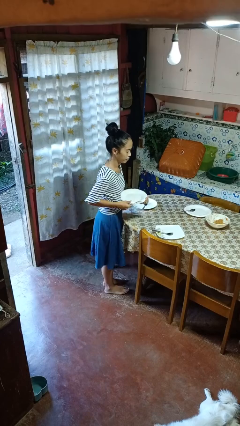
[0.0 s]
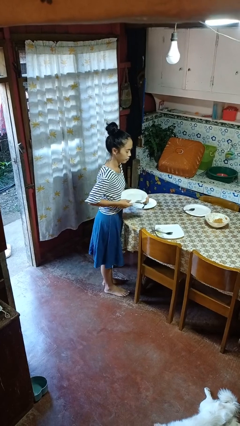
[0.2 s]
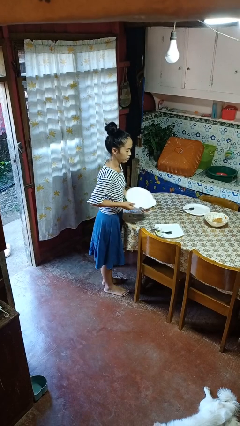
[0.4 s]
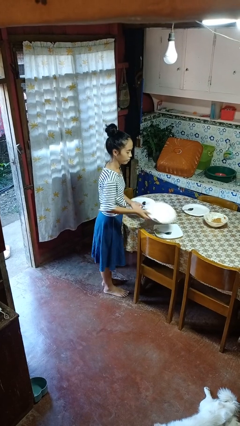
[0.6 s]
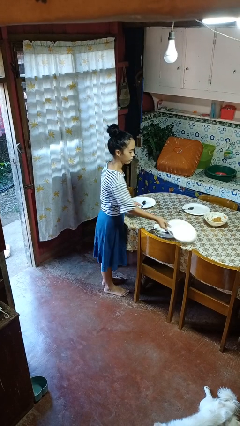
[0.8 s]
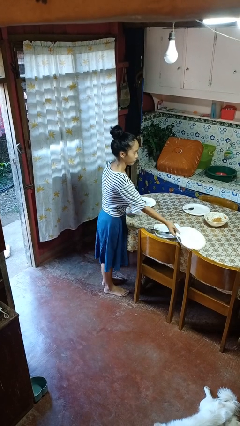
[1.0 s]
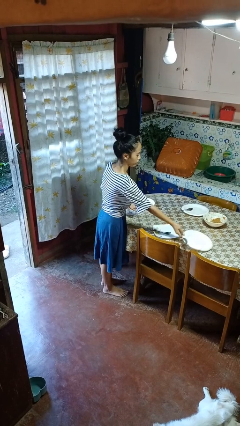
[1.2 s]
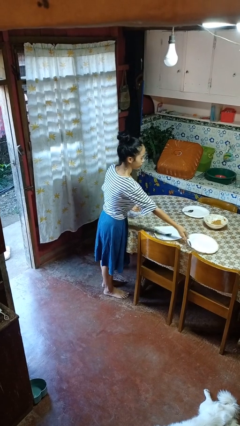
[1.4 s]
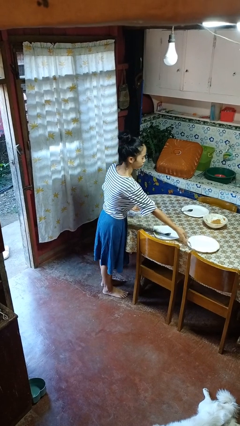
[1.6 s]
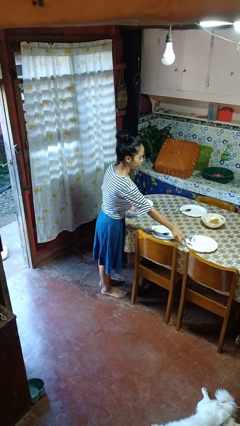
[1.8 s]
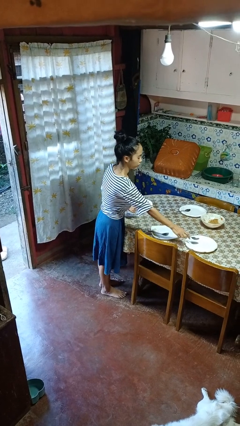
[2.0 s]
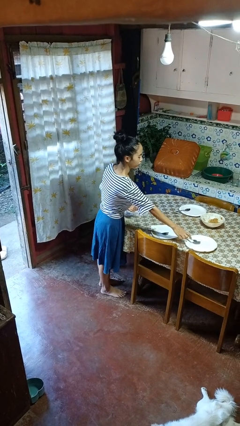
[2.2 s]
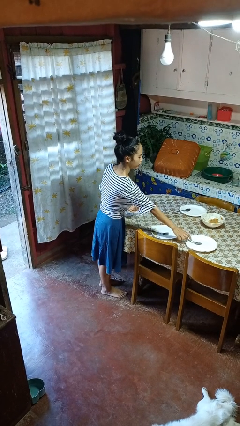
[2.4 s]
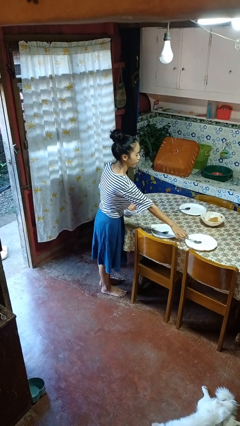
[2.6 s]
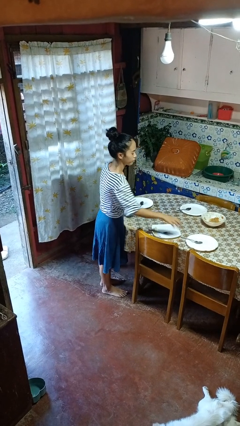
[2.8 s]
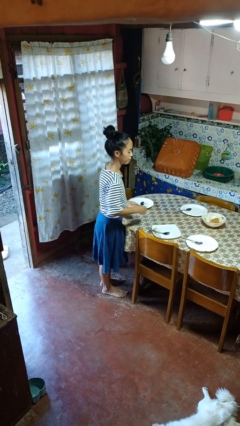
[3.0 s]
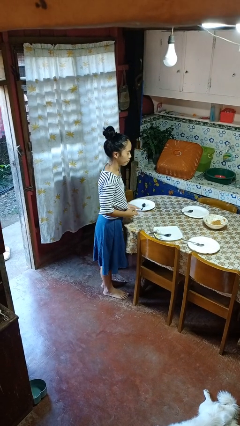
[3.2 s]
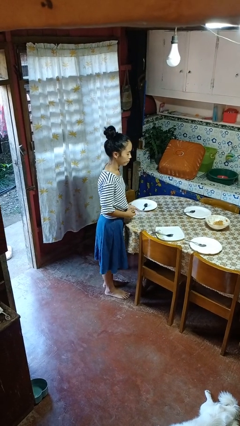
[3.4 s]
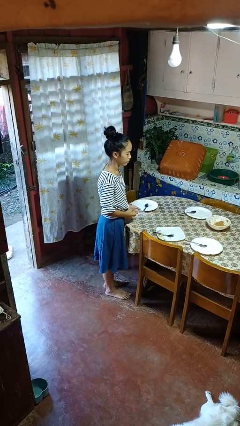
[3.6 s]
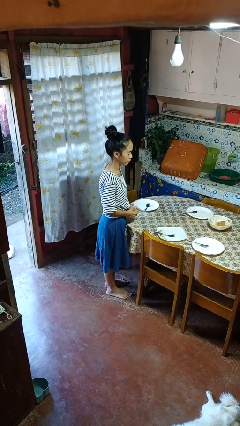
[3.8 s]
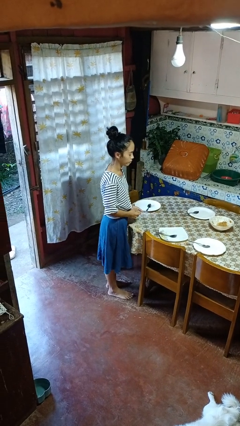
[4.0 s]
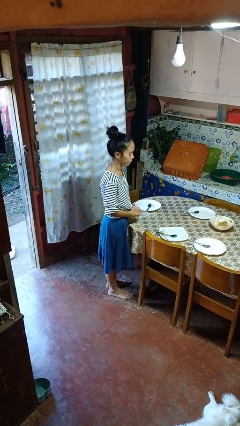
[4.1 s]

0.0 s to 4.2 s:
person sets table

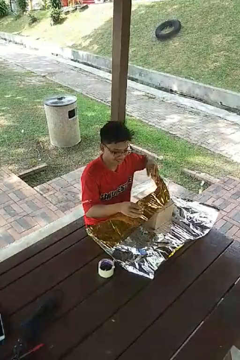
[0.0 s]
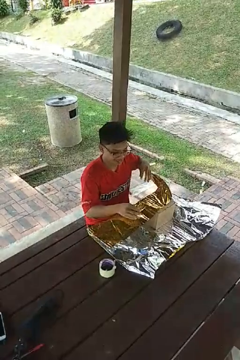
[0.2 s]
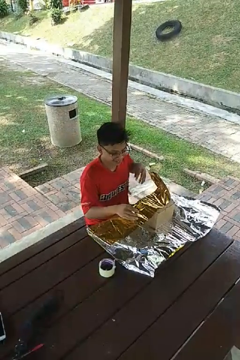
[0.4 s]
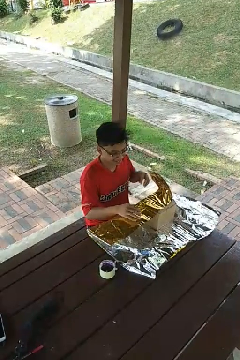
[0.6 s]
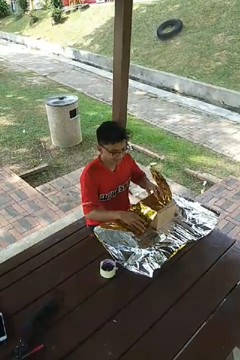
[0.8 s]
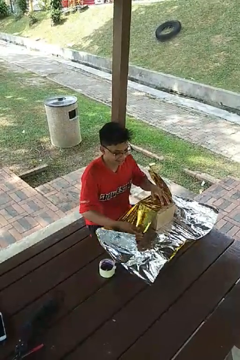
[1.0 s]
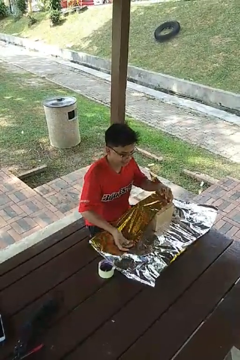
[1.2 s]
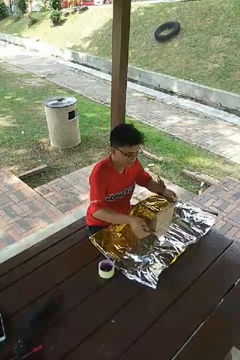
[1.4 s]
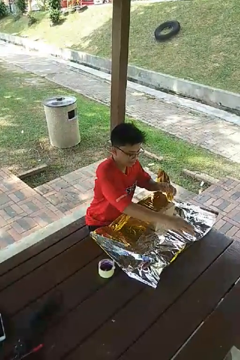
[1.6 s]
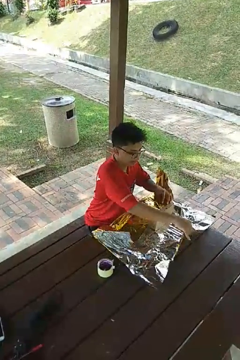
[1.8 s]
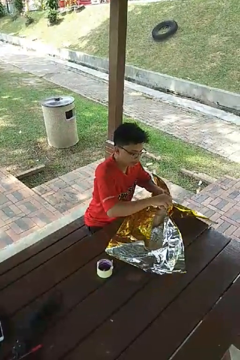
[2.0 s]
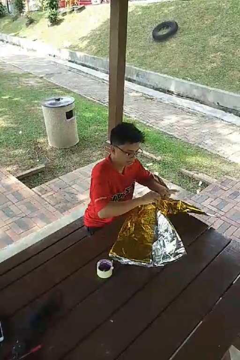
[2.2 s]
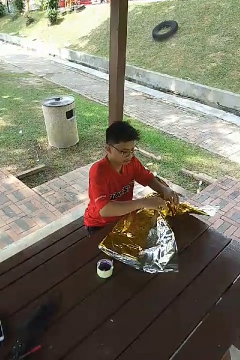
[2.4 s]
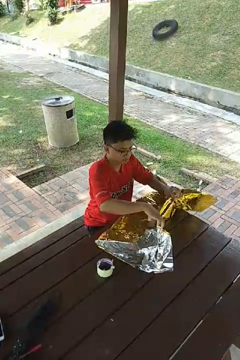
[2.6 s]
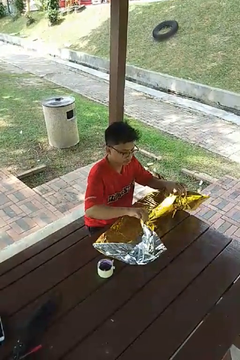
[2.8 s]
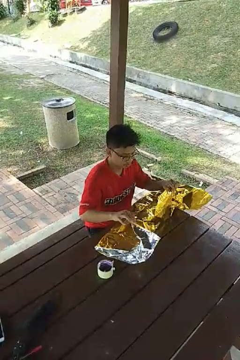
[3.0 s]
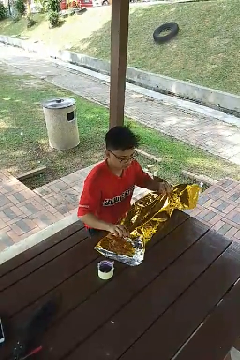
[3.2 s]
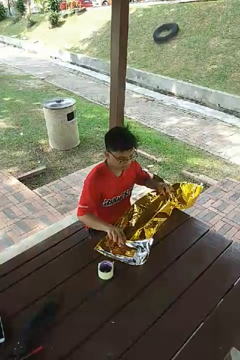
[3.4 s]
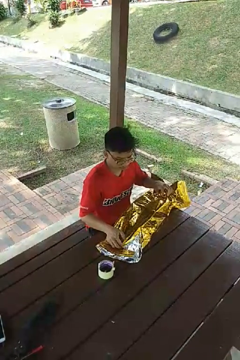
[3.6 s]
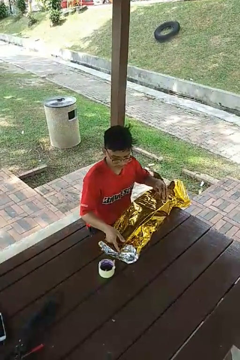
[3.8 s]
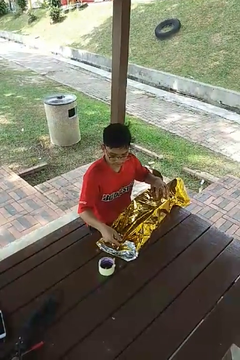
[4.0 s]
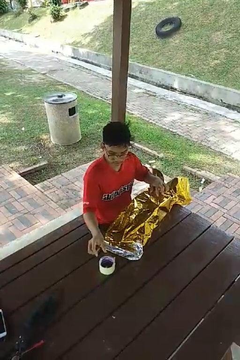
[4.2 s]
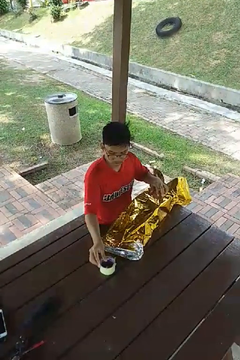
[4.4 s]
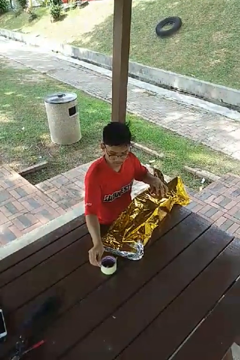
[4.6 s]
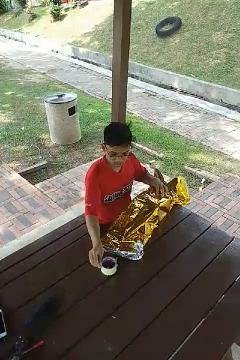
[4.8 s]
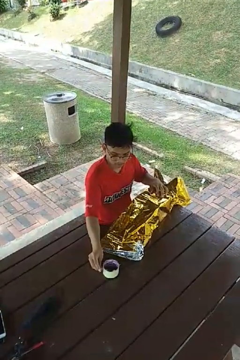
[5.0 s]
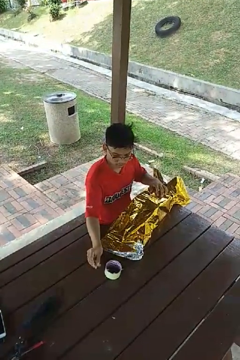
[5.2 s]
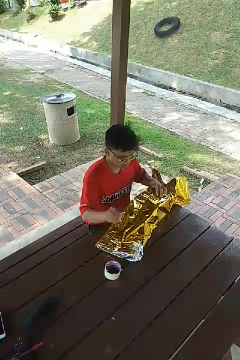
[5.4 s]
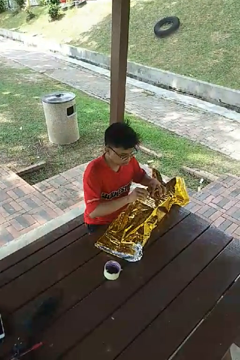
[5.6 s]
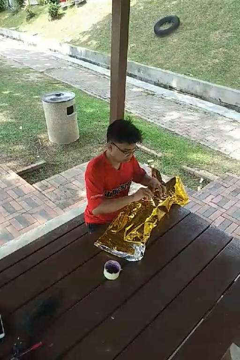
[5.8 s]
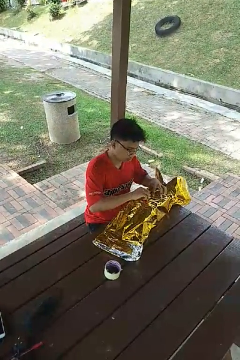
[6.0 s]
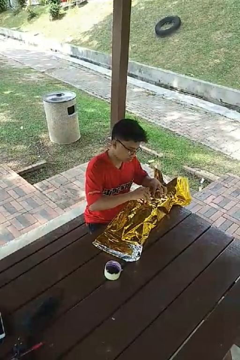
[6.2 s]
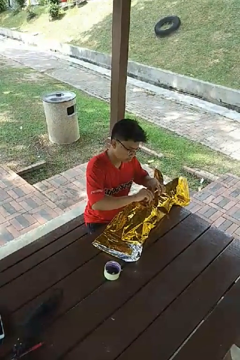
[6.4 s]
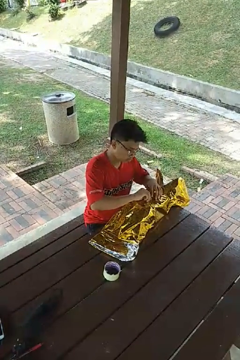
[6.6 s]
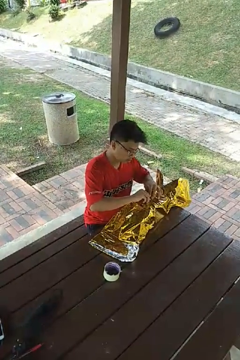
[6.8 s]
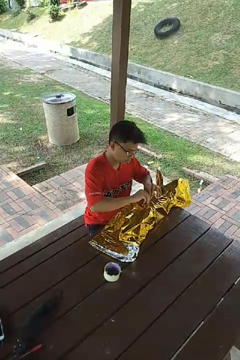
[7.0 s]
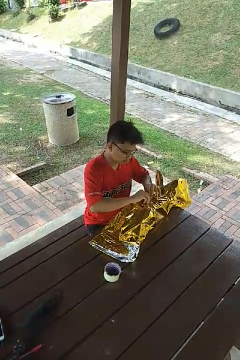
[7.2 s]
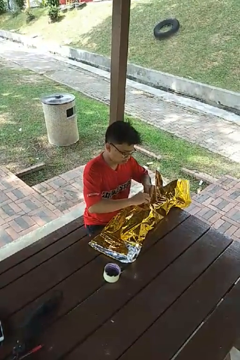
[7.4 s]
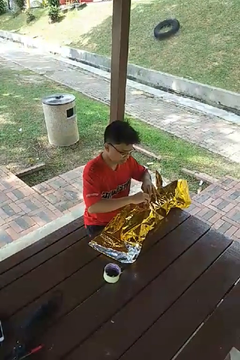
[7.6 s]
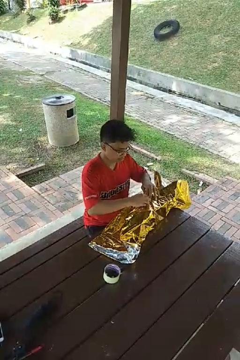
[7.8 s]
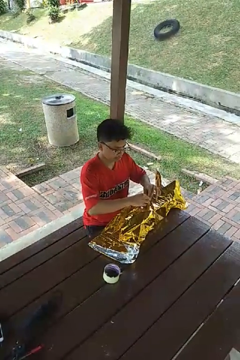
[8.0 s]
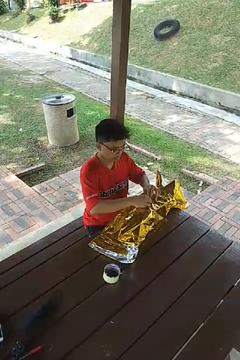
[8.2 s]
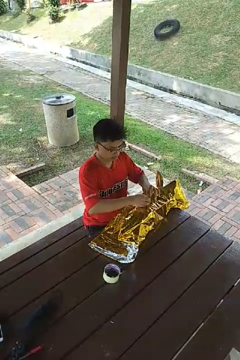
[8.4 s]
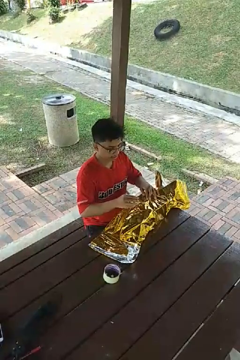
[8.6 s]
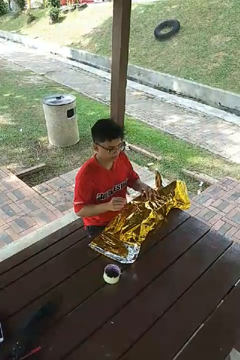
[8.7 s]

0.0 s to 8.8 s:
person wraps box

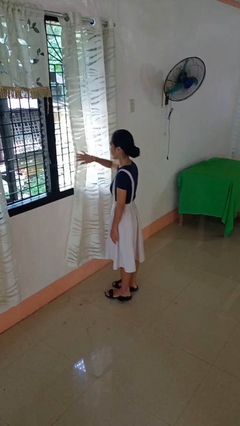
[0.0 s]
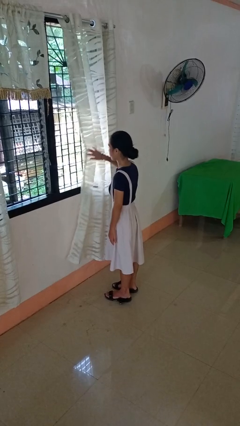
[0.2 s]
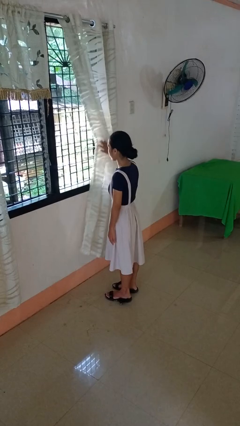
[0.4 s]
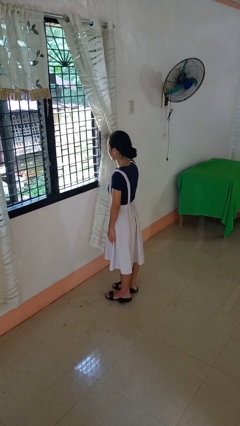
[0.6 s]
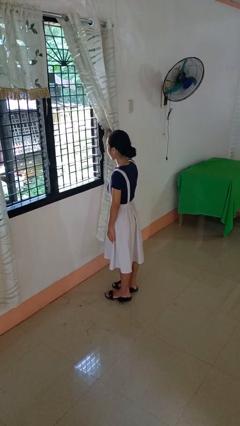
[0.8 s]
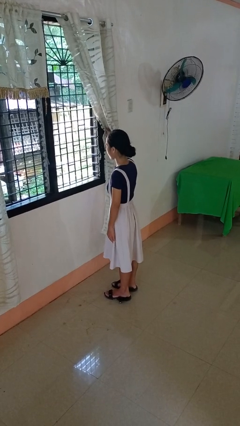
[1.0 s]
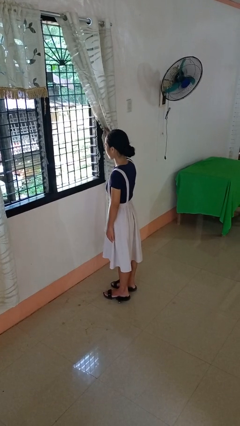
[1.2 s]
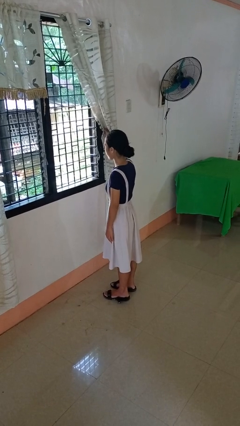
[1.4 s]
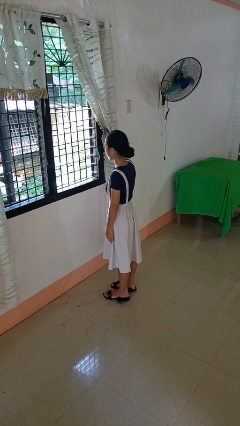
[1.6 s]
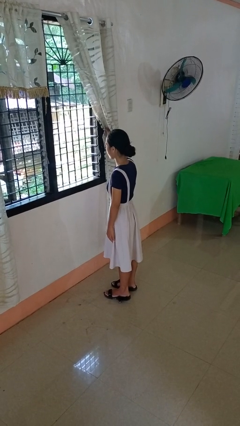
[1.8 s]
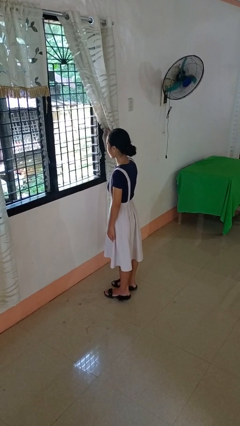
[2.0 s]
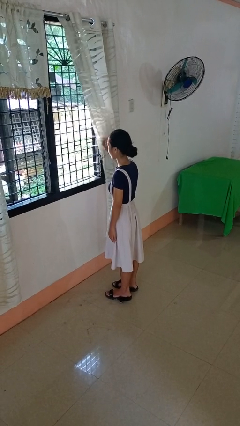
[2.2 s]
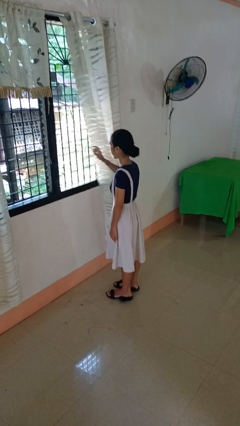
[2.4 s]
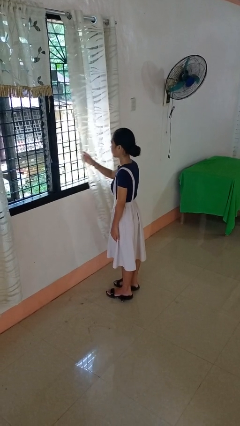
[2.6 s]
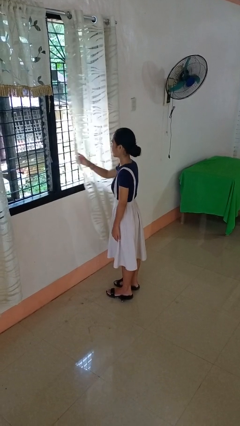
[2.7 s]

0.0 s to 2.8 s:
person opens curtains

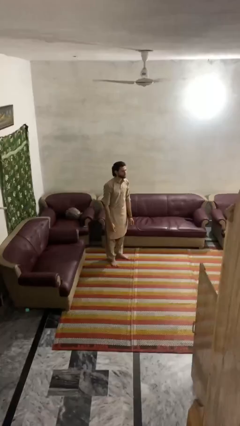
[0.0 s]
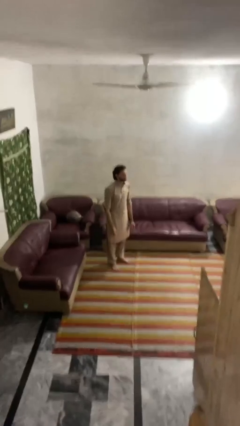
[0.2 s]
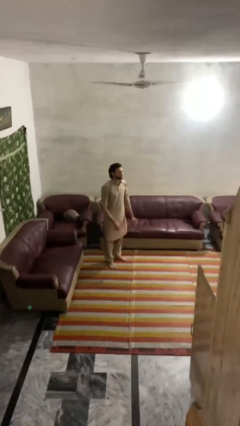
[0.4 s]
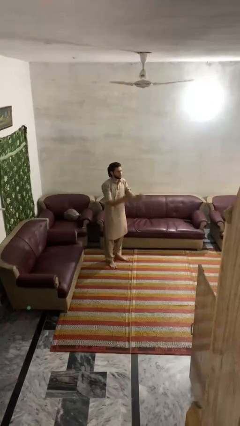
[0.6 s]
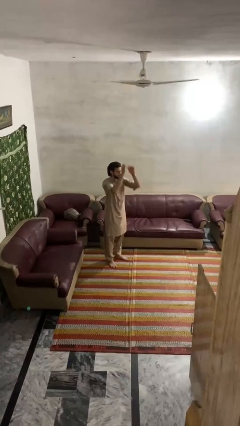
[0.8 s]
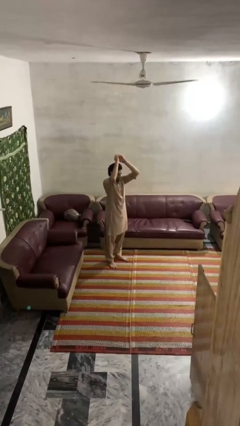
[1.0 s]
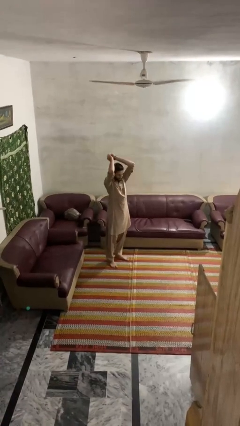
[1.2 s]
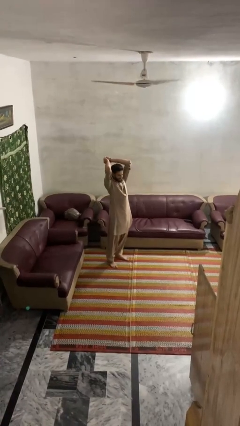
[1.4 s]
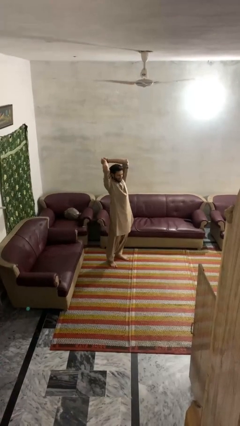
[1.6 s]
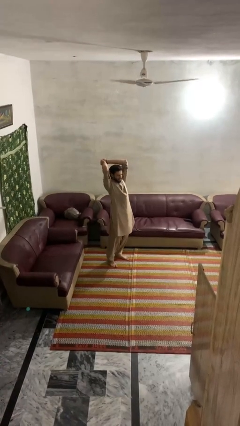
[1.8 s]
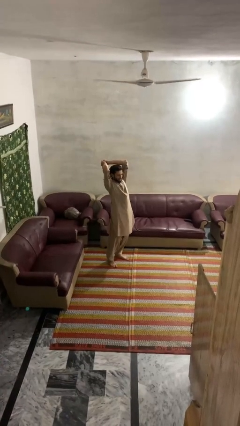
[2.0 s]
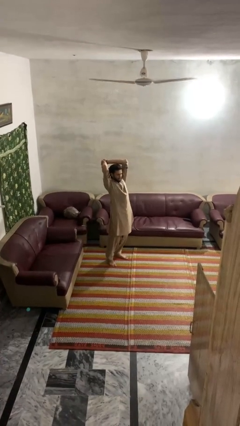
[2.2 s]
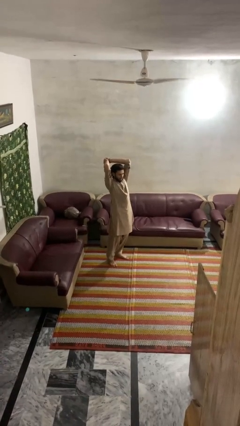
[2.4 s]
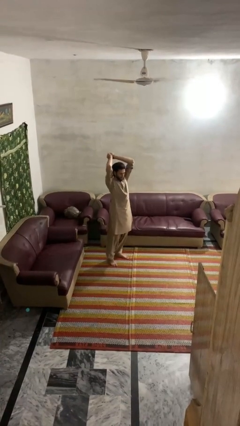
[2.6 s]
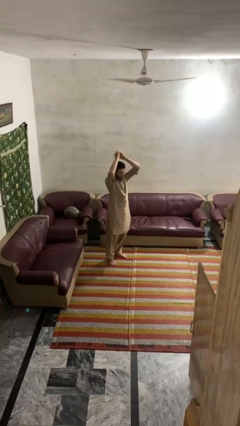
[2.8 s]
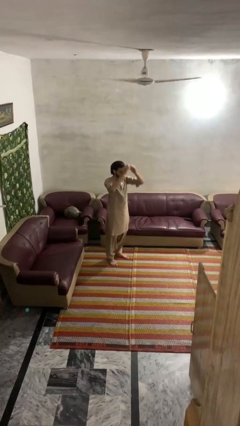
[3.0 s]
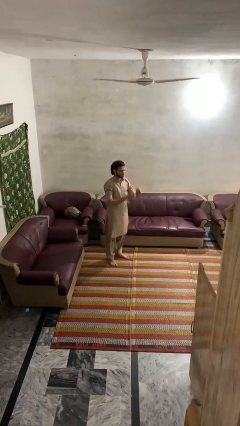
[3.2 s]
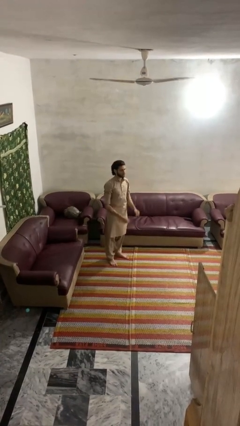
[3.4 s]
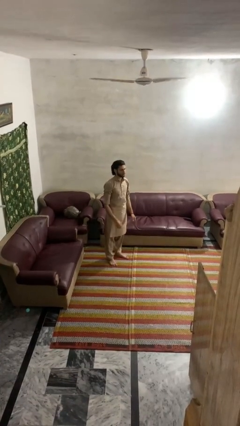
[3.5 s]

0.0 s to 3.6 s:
person stretches arms over head

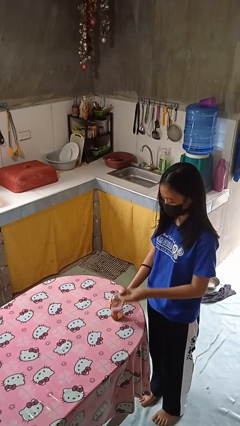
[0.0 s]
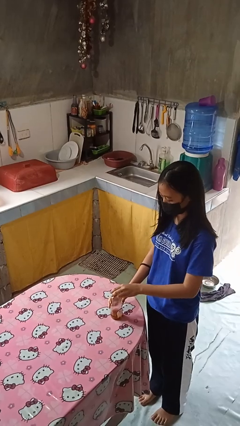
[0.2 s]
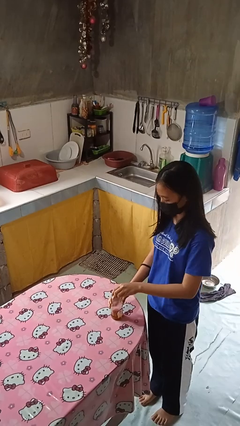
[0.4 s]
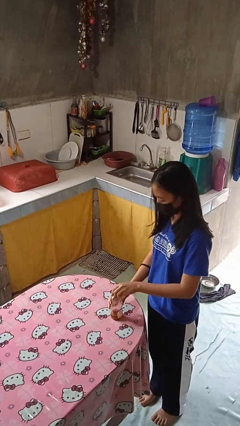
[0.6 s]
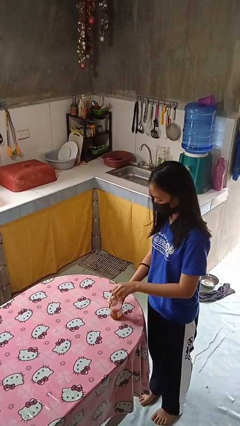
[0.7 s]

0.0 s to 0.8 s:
person closes jar
